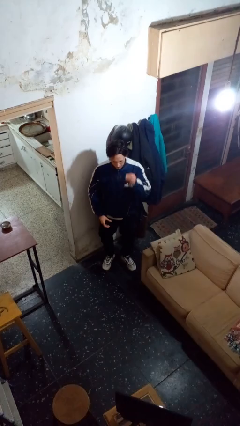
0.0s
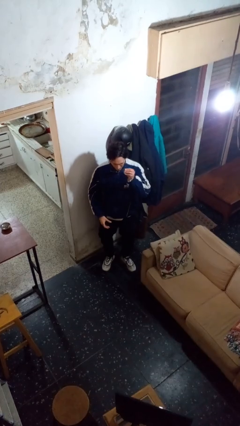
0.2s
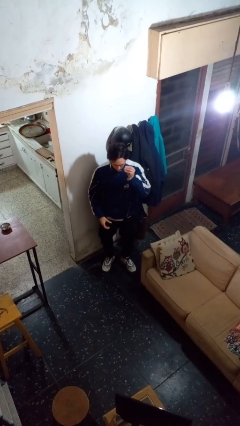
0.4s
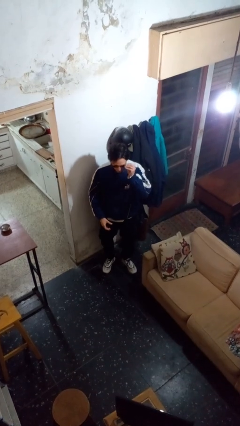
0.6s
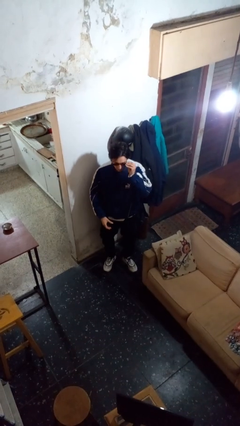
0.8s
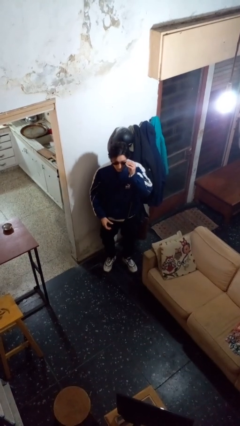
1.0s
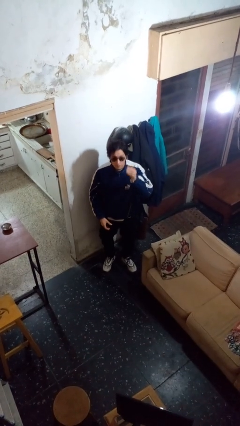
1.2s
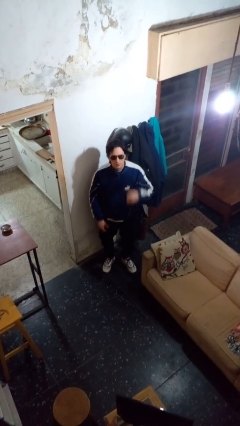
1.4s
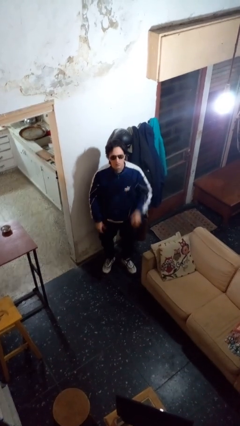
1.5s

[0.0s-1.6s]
person puts on sunglasses

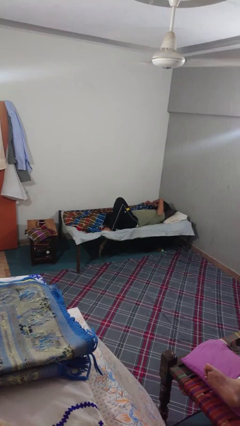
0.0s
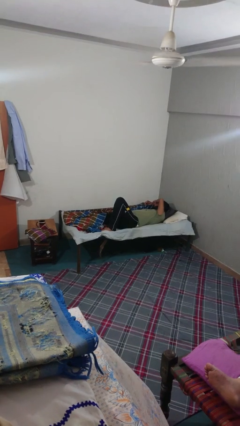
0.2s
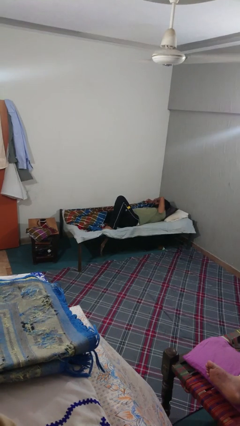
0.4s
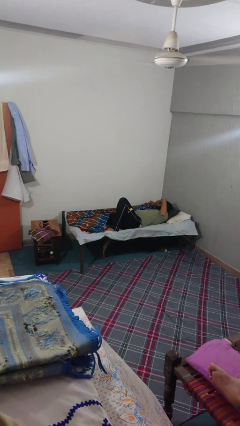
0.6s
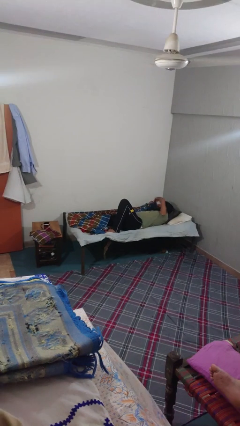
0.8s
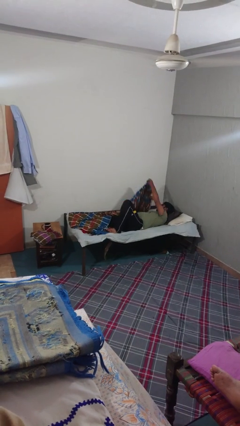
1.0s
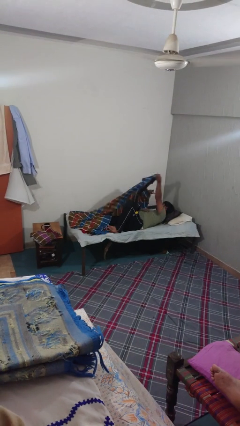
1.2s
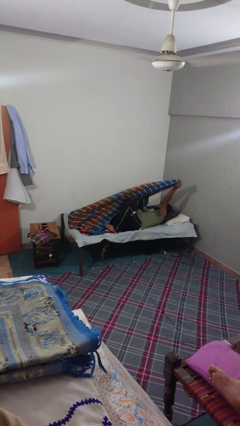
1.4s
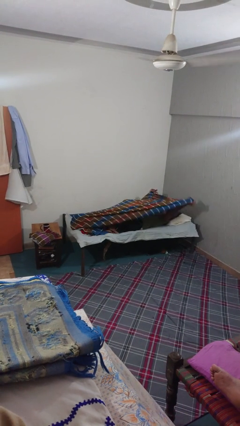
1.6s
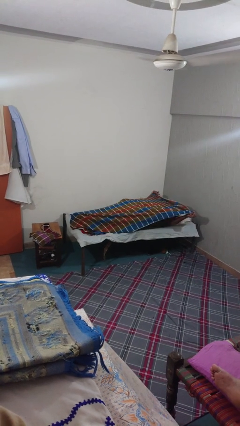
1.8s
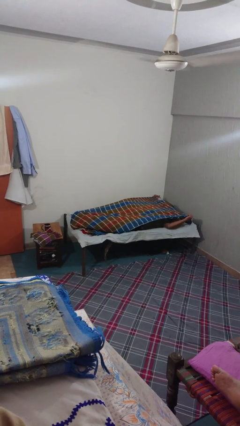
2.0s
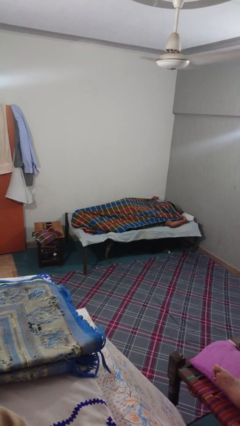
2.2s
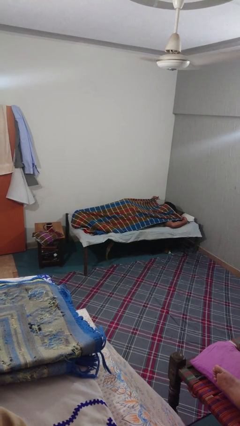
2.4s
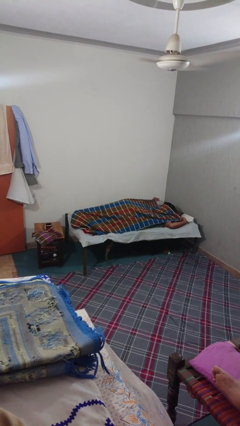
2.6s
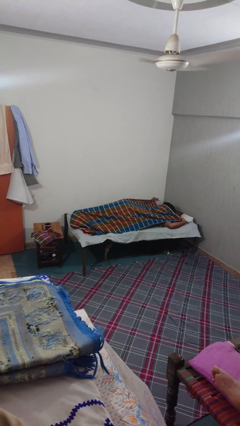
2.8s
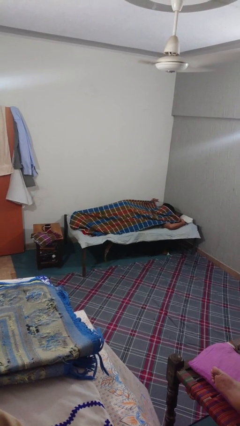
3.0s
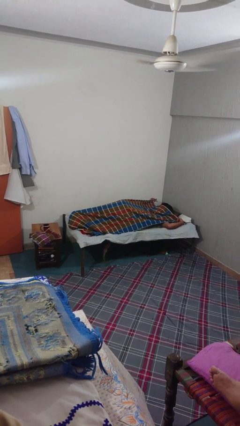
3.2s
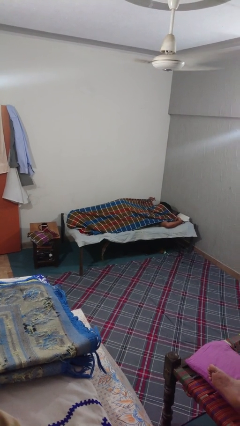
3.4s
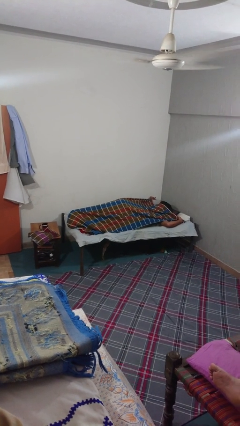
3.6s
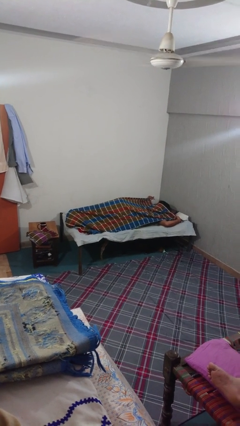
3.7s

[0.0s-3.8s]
person covers with bedsheets

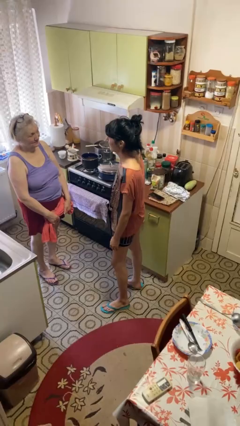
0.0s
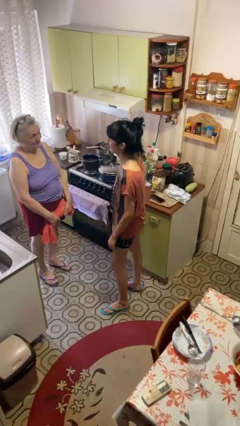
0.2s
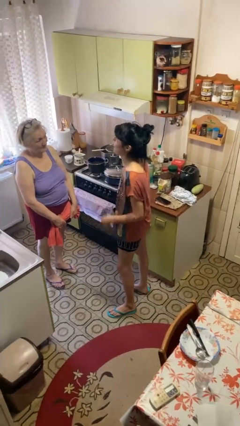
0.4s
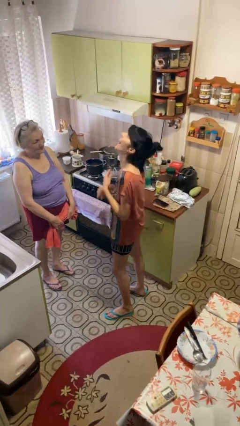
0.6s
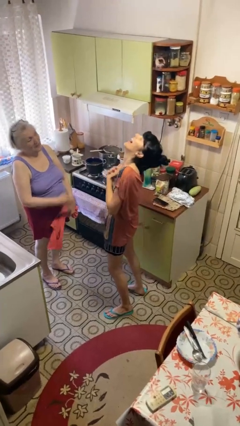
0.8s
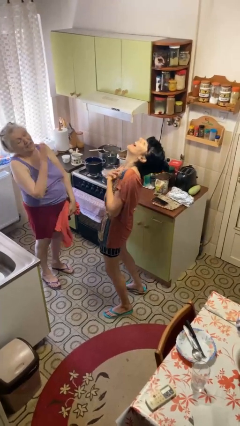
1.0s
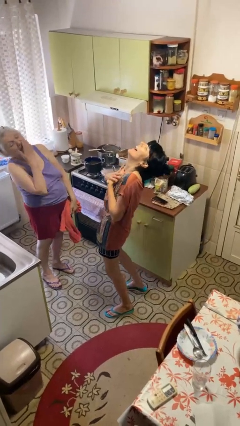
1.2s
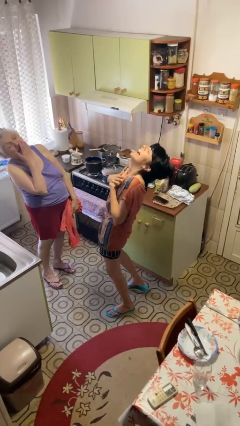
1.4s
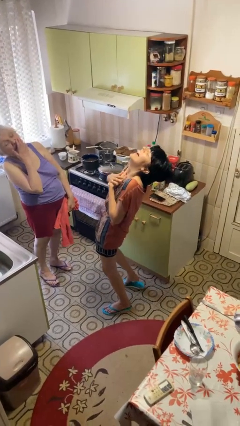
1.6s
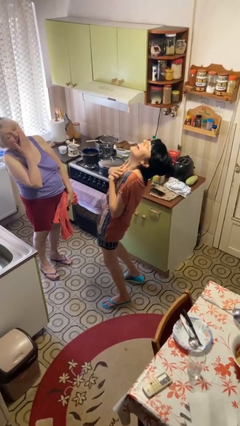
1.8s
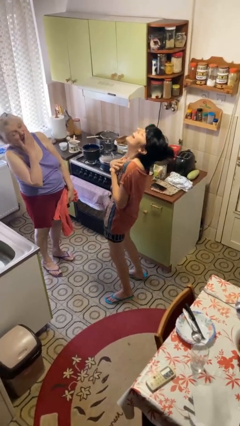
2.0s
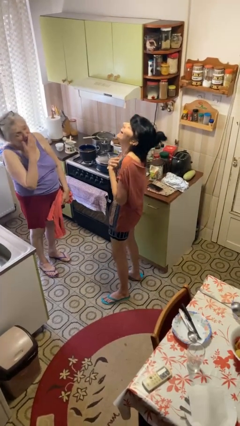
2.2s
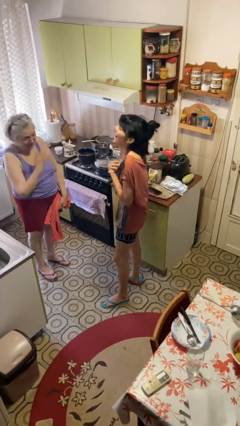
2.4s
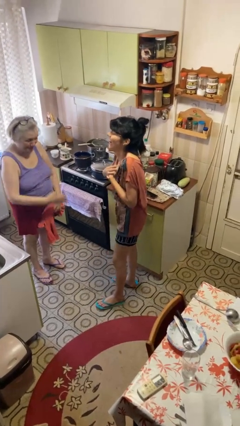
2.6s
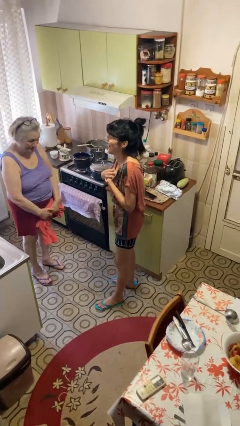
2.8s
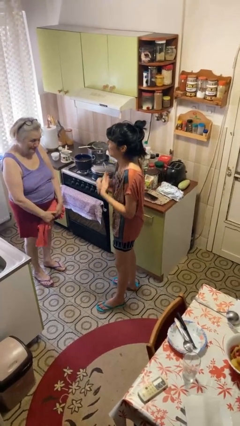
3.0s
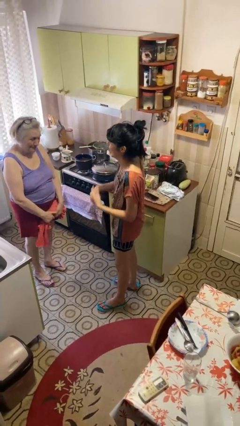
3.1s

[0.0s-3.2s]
person laughs with person

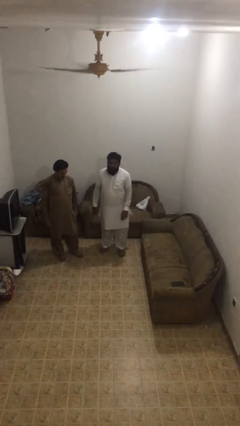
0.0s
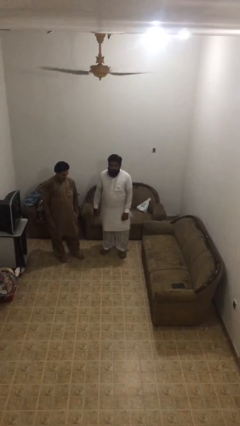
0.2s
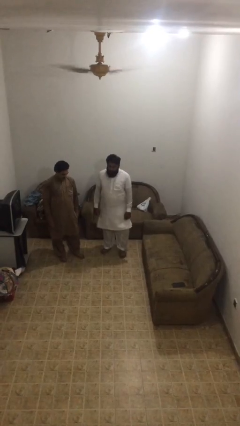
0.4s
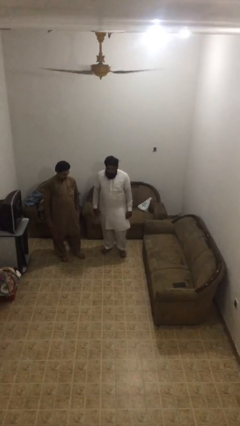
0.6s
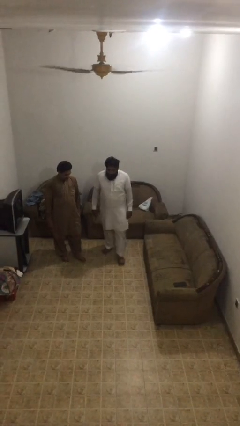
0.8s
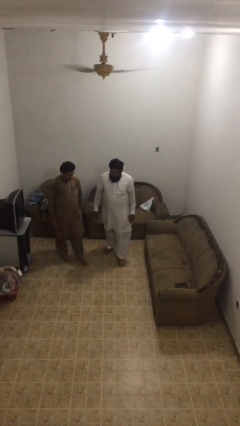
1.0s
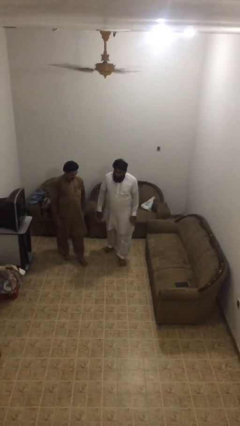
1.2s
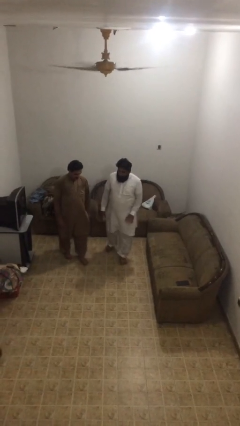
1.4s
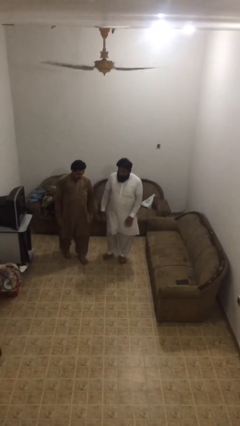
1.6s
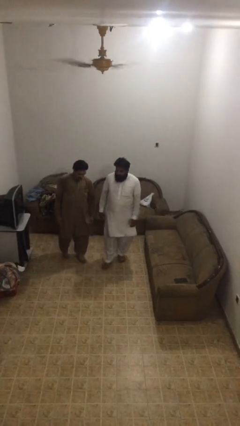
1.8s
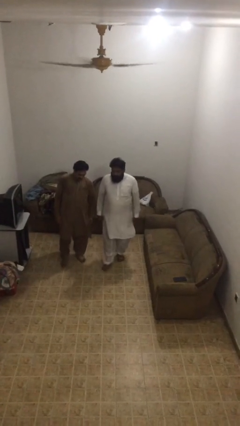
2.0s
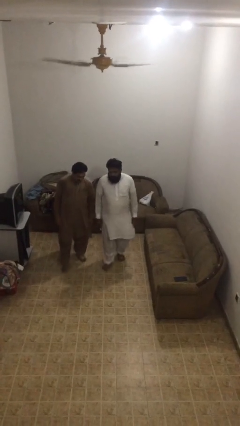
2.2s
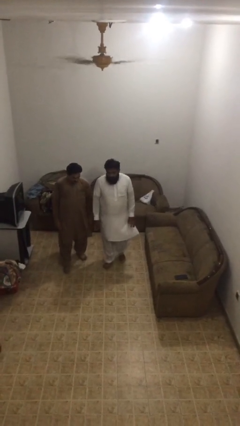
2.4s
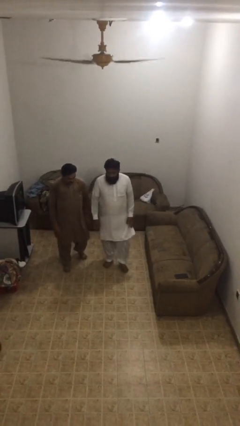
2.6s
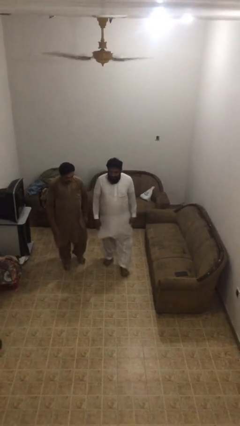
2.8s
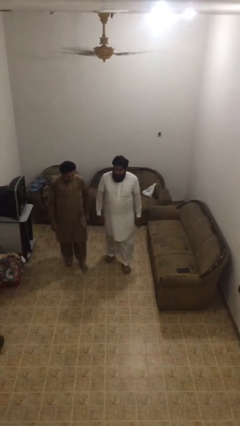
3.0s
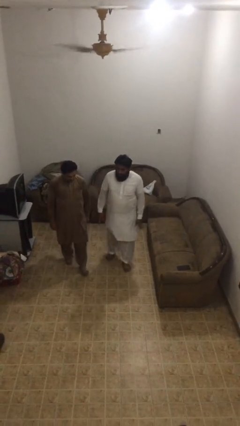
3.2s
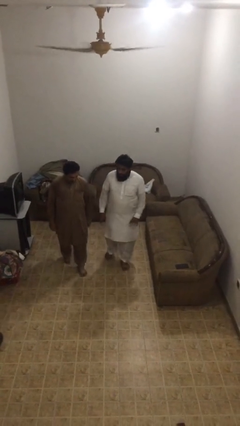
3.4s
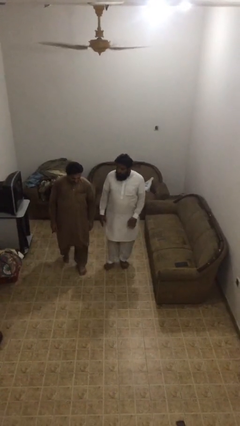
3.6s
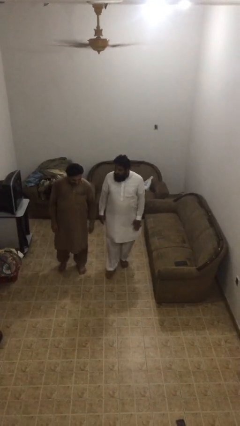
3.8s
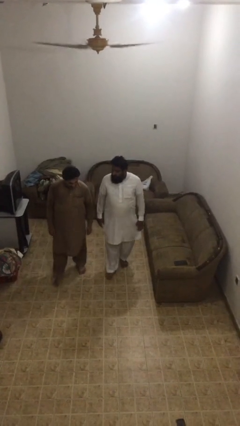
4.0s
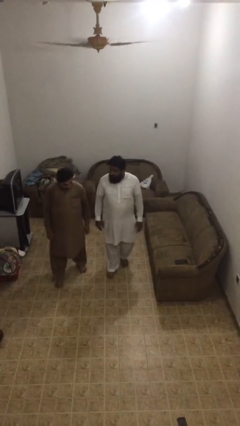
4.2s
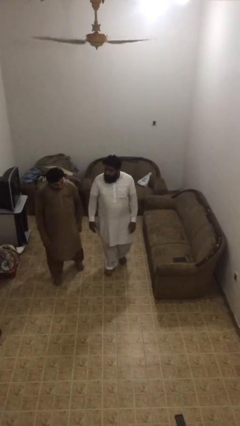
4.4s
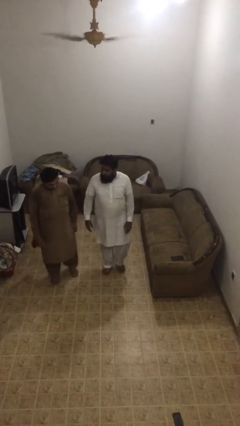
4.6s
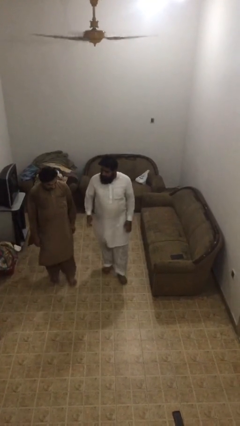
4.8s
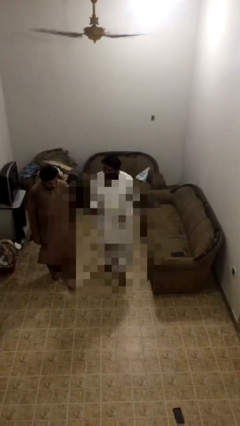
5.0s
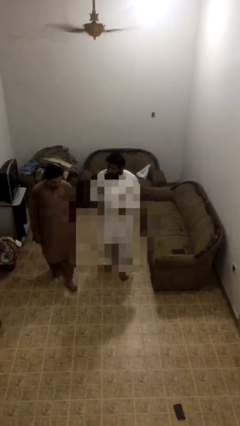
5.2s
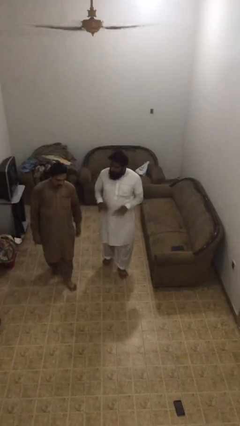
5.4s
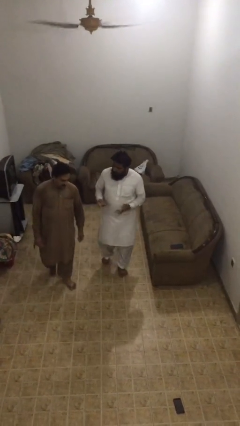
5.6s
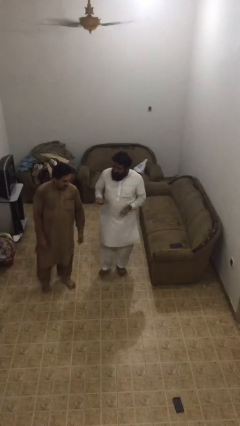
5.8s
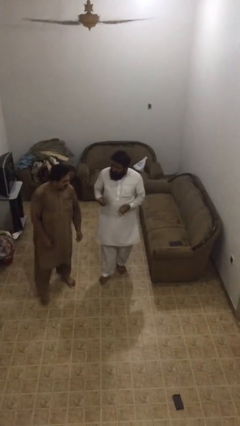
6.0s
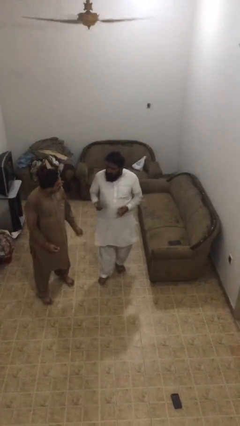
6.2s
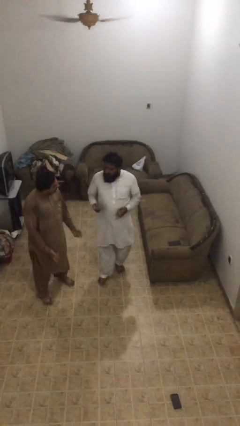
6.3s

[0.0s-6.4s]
person talks to person

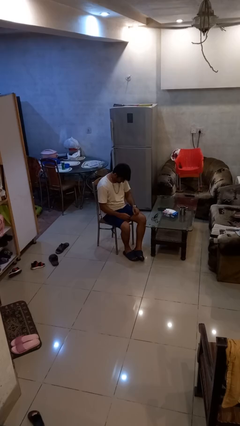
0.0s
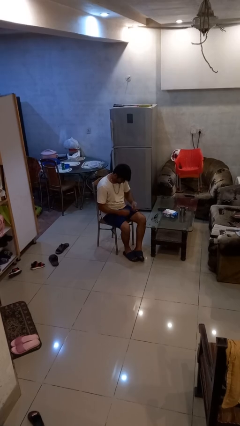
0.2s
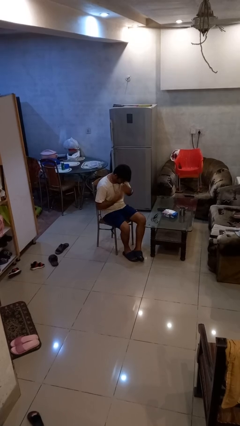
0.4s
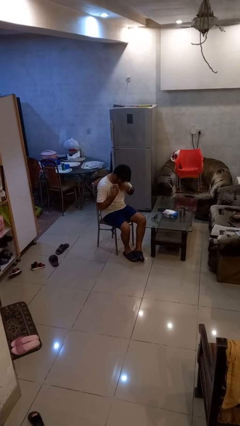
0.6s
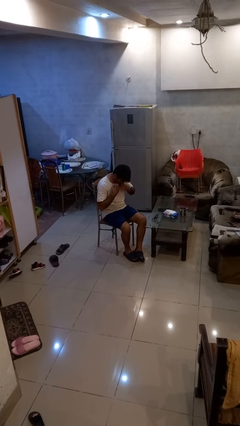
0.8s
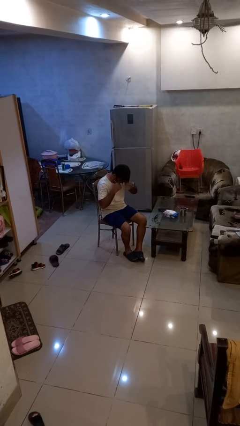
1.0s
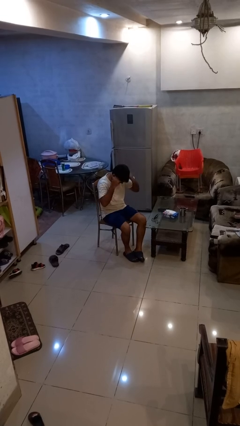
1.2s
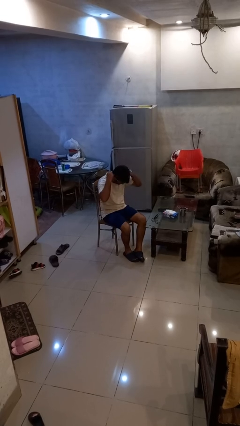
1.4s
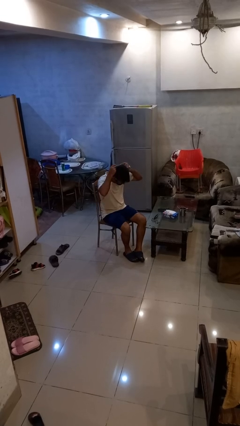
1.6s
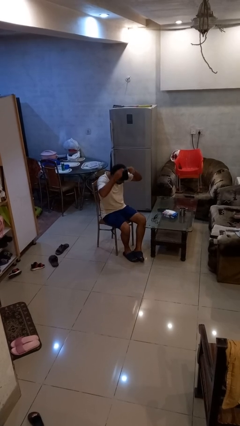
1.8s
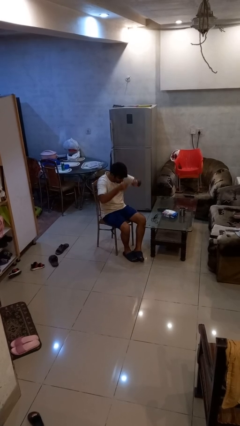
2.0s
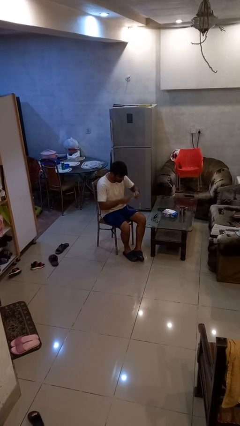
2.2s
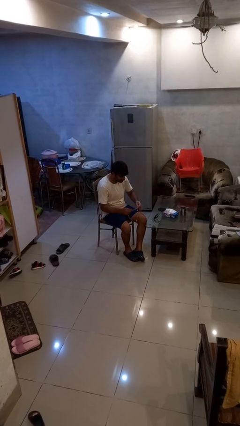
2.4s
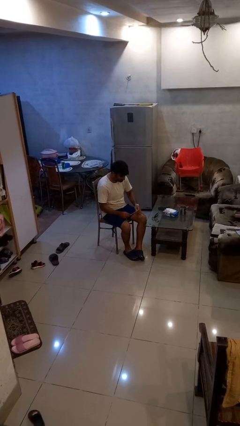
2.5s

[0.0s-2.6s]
person takes off necklace

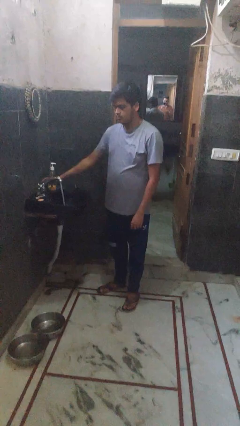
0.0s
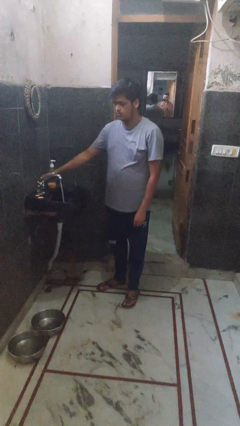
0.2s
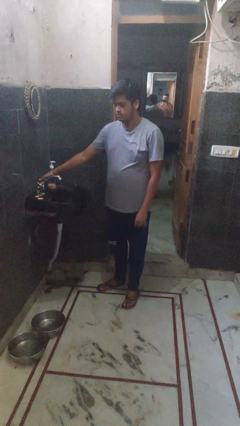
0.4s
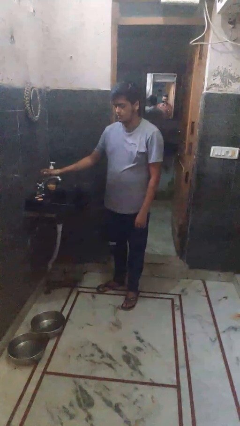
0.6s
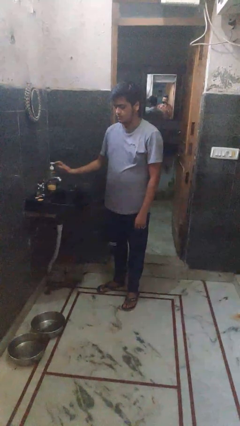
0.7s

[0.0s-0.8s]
person turns off faucet
